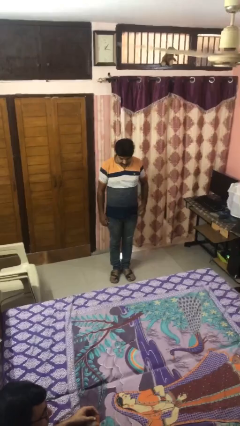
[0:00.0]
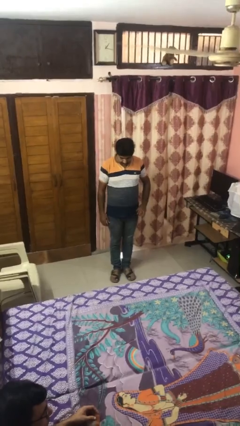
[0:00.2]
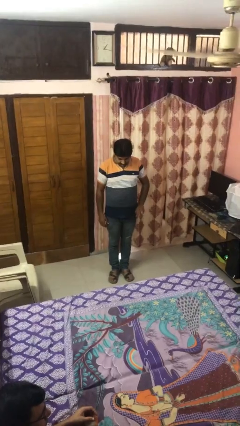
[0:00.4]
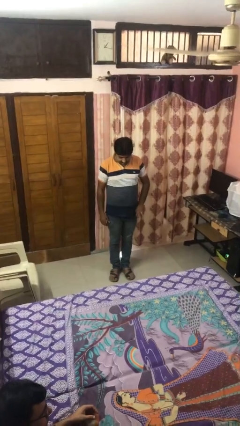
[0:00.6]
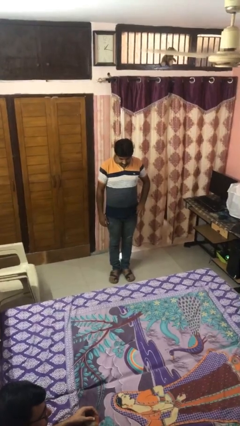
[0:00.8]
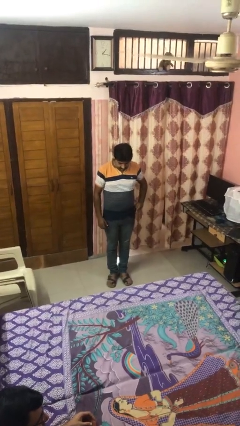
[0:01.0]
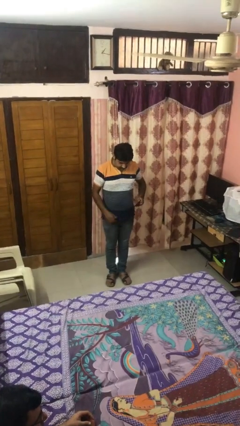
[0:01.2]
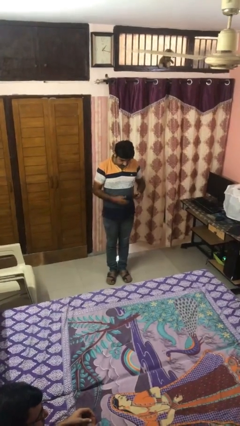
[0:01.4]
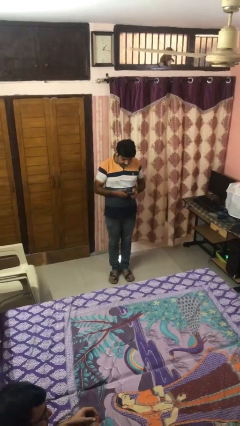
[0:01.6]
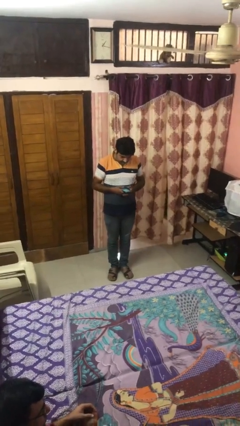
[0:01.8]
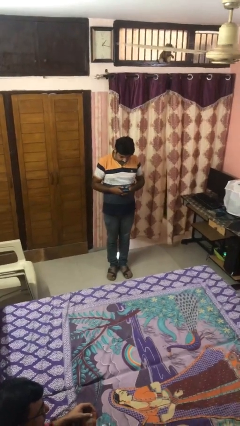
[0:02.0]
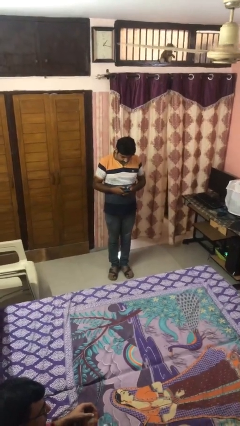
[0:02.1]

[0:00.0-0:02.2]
person takes phone from pocket

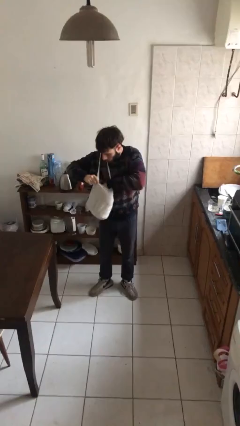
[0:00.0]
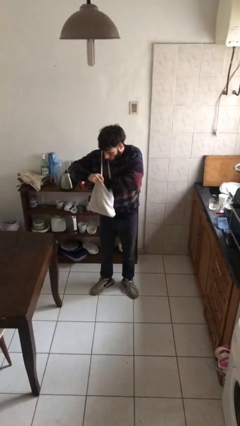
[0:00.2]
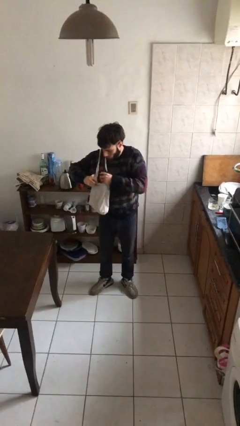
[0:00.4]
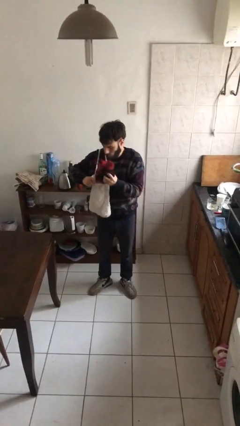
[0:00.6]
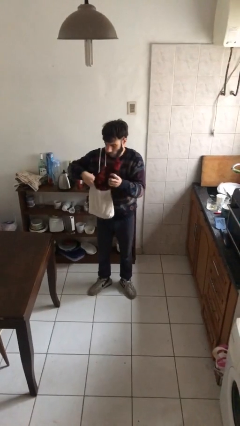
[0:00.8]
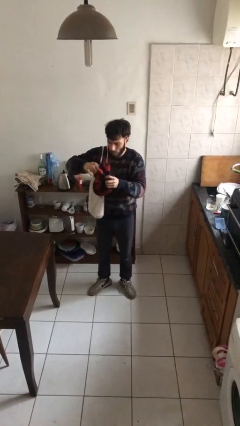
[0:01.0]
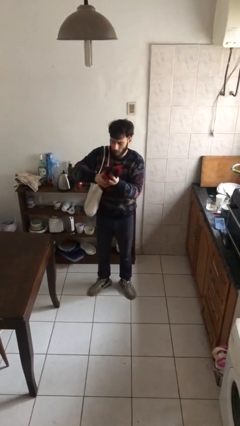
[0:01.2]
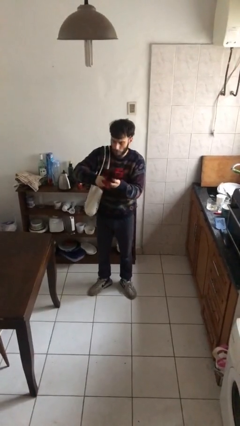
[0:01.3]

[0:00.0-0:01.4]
person takes object from purse

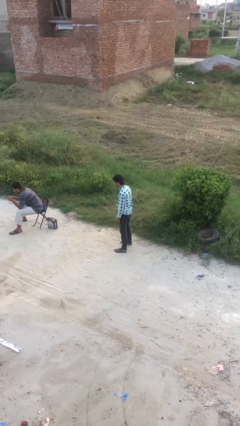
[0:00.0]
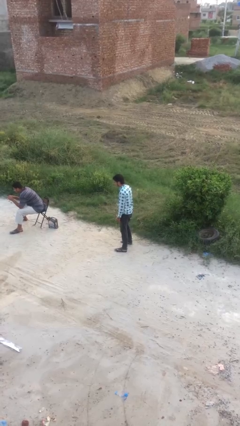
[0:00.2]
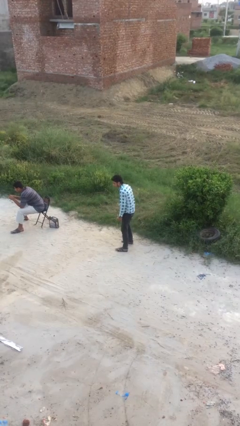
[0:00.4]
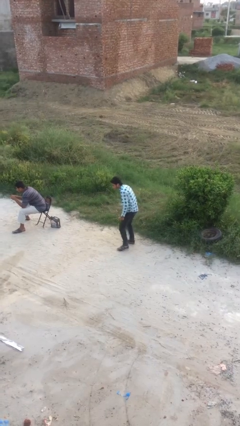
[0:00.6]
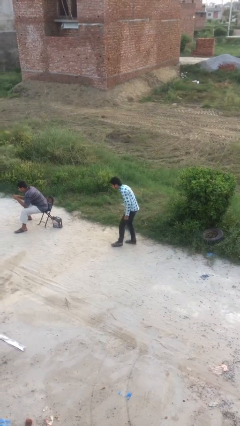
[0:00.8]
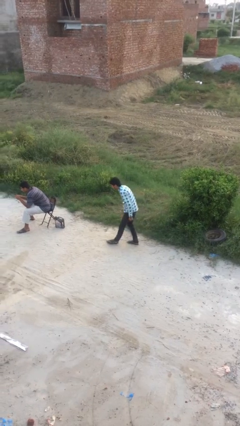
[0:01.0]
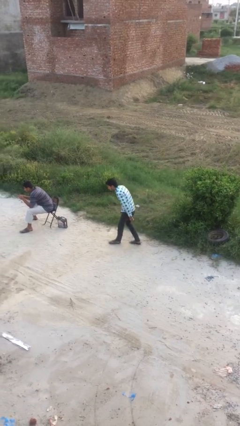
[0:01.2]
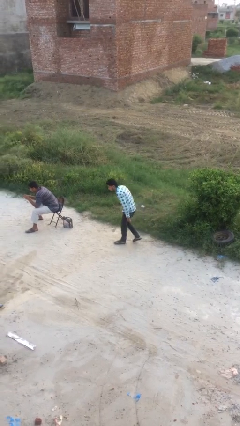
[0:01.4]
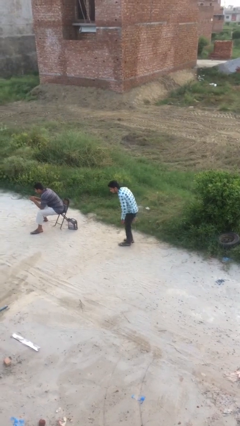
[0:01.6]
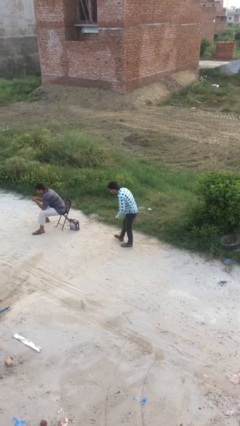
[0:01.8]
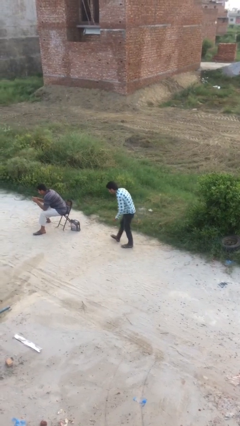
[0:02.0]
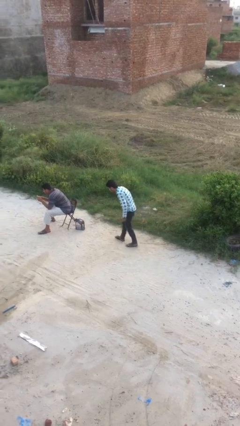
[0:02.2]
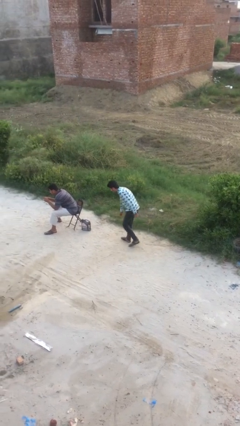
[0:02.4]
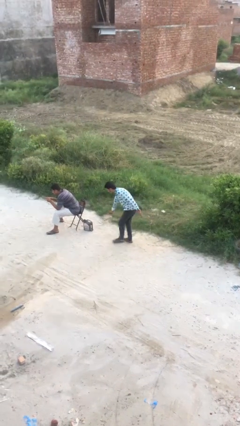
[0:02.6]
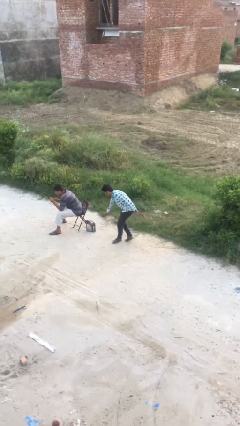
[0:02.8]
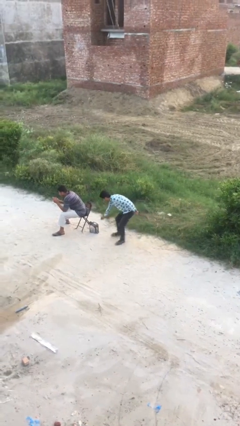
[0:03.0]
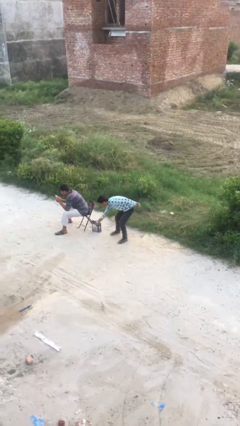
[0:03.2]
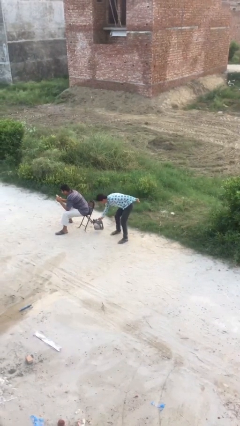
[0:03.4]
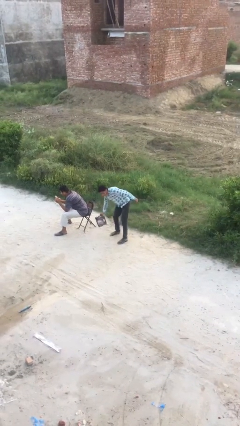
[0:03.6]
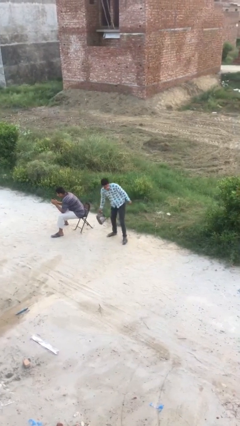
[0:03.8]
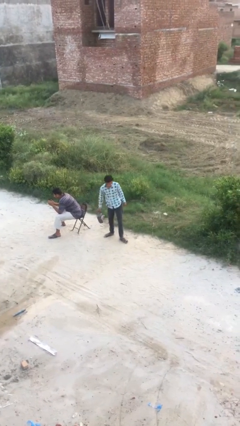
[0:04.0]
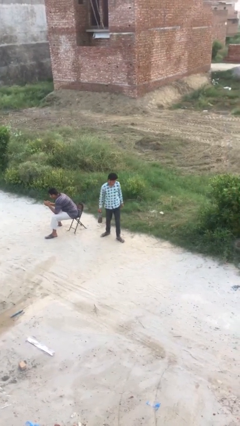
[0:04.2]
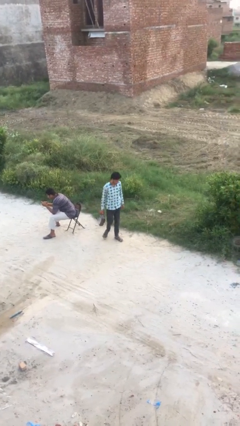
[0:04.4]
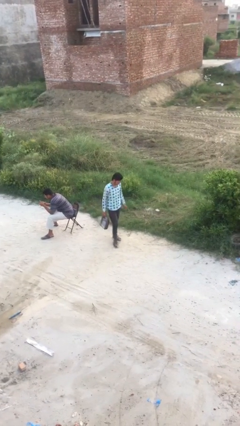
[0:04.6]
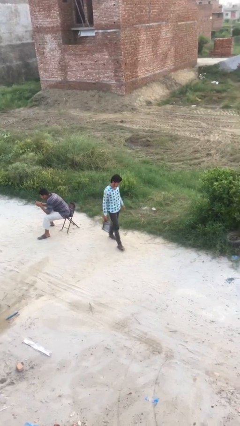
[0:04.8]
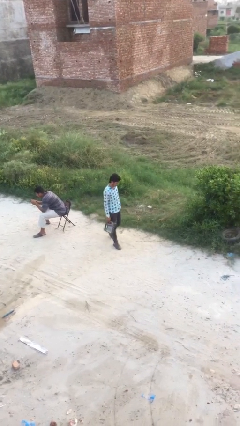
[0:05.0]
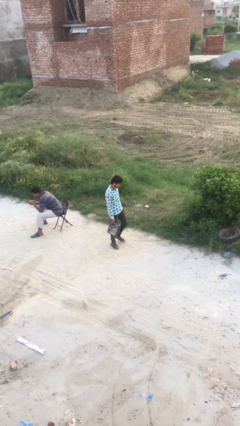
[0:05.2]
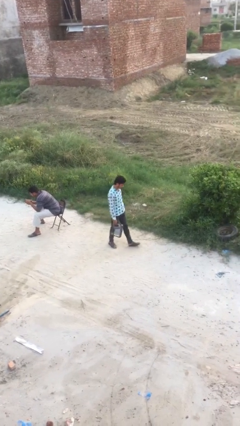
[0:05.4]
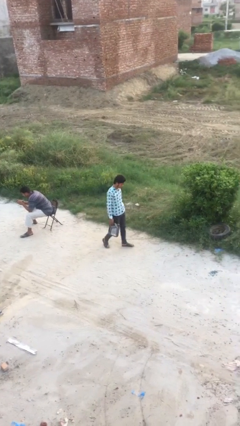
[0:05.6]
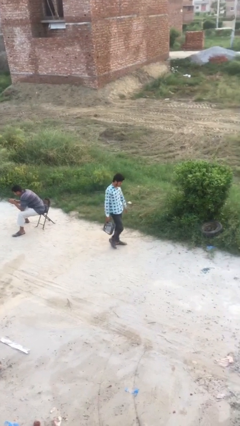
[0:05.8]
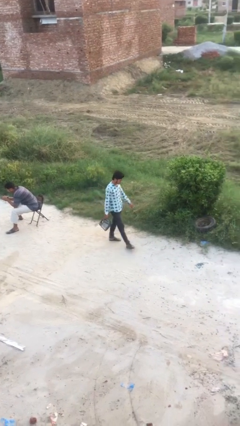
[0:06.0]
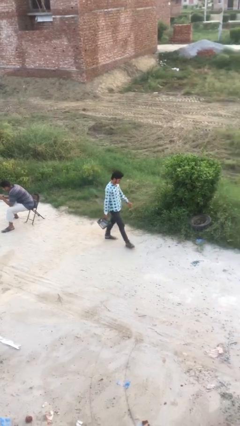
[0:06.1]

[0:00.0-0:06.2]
person steals object from person

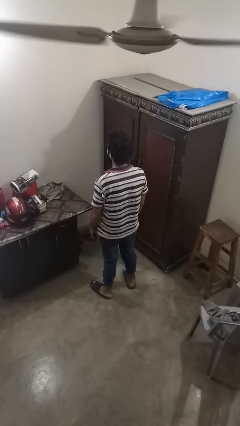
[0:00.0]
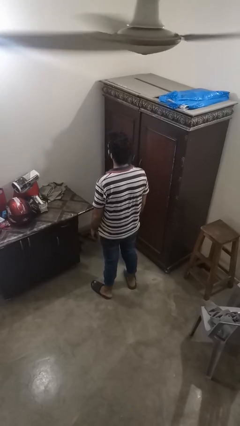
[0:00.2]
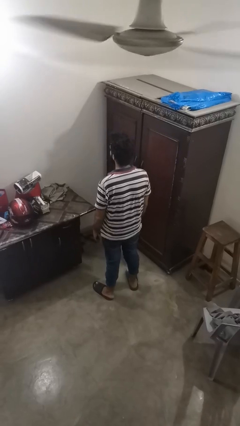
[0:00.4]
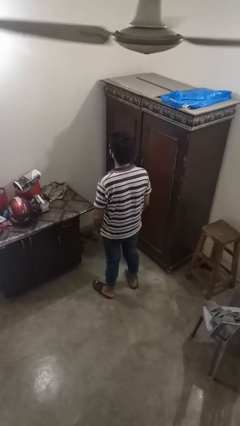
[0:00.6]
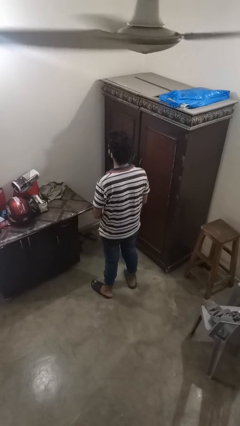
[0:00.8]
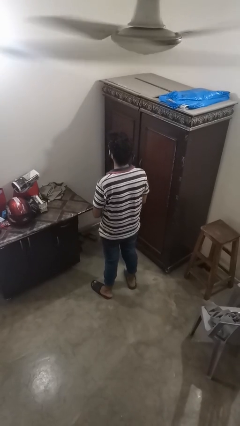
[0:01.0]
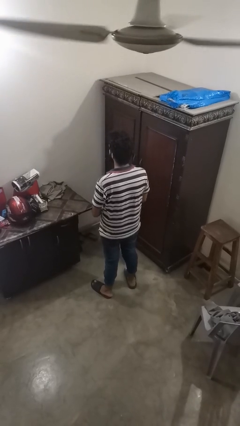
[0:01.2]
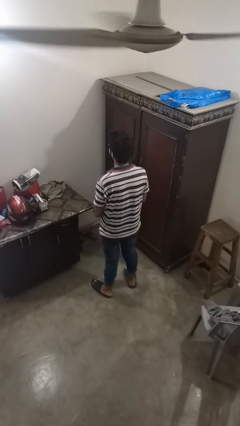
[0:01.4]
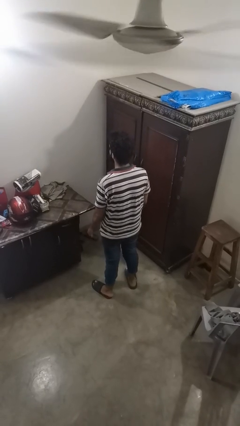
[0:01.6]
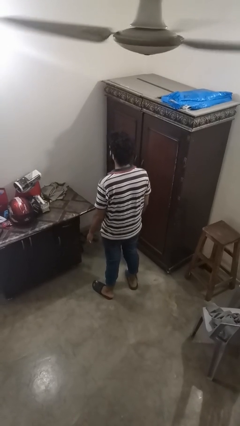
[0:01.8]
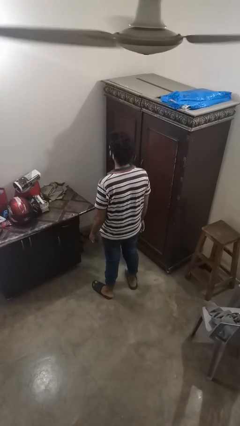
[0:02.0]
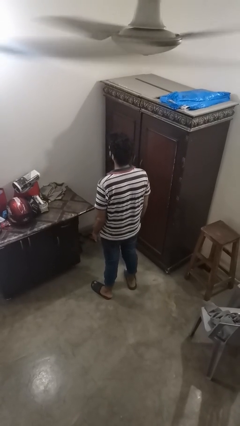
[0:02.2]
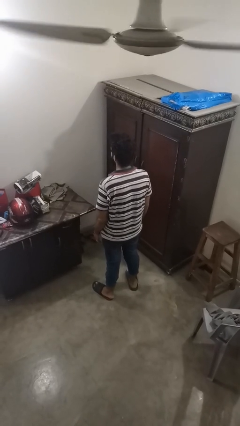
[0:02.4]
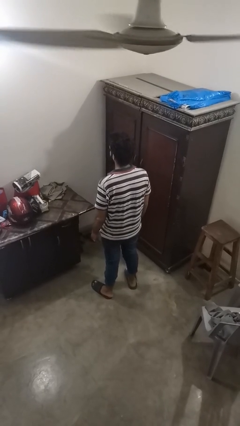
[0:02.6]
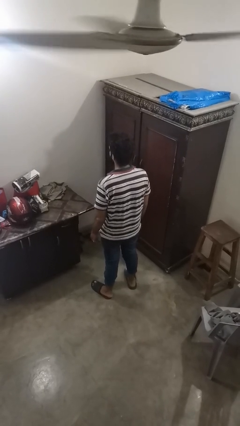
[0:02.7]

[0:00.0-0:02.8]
person puts on ring

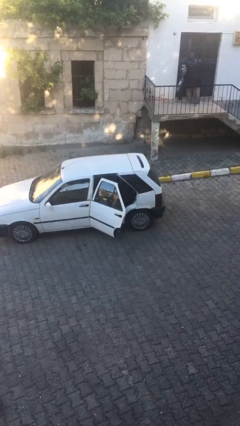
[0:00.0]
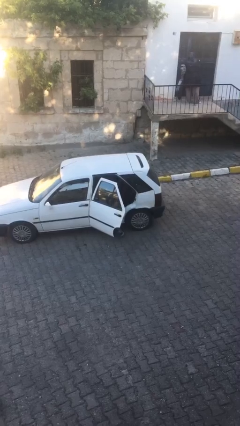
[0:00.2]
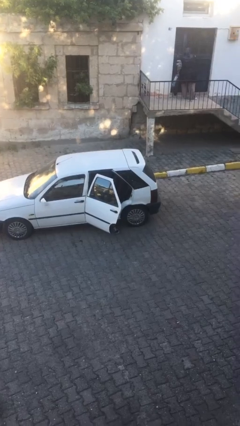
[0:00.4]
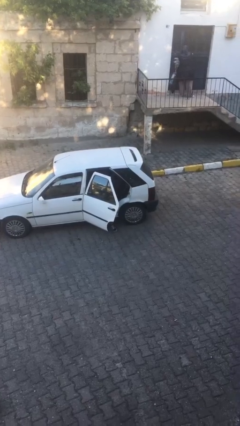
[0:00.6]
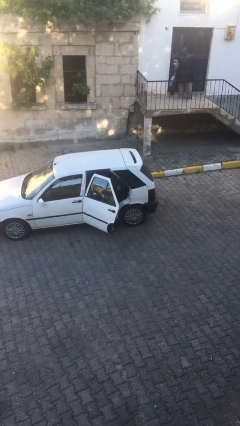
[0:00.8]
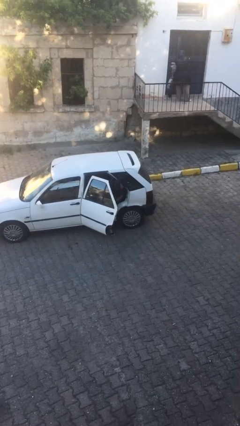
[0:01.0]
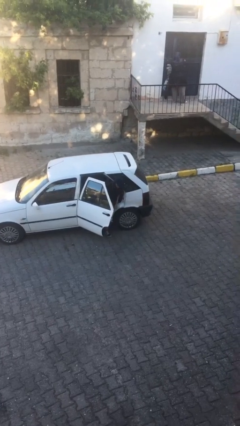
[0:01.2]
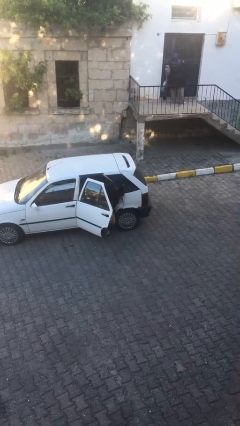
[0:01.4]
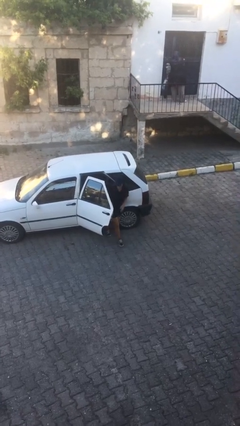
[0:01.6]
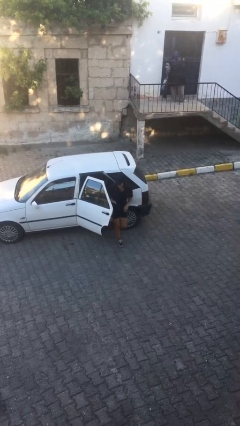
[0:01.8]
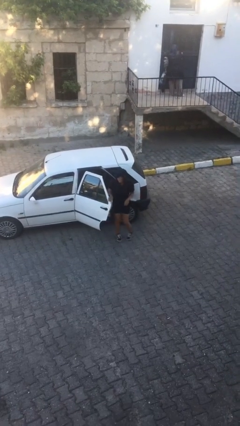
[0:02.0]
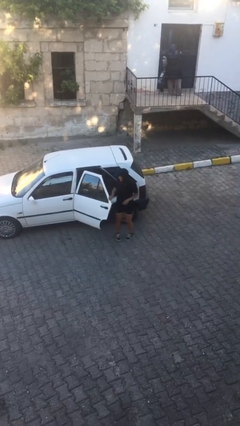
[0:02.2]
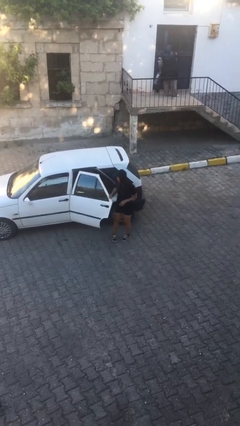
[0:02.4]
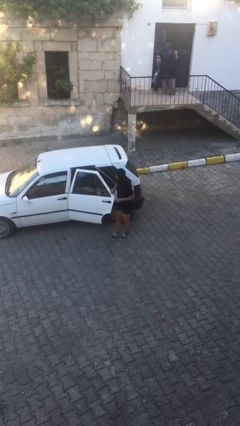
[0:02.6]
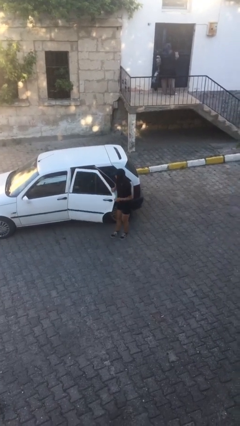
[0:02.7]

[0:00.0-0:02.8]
person exits car

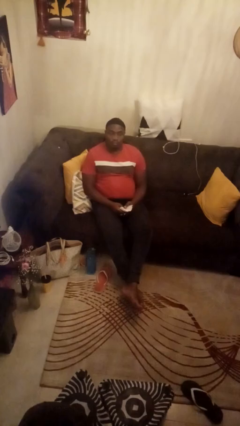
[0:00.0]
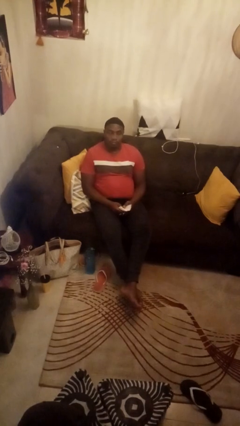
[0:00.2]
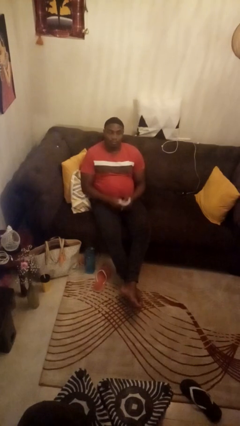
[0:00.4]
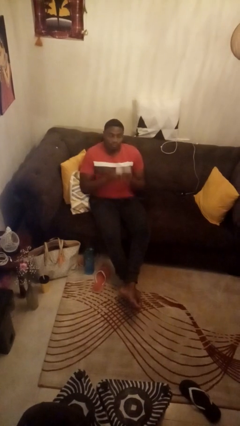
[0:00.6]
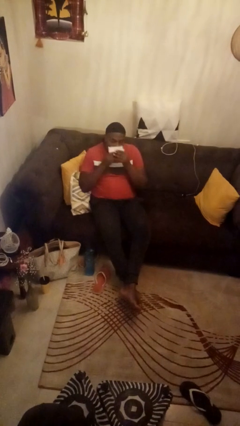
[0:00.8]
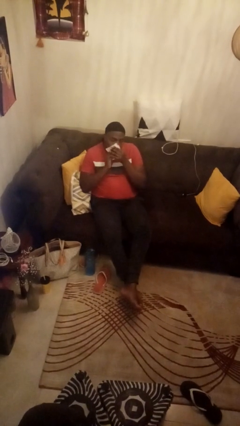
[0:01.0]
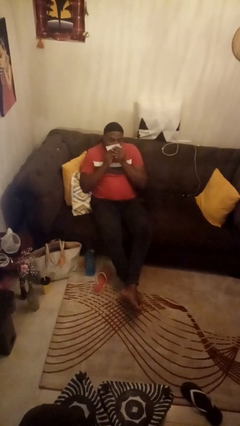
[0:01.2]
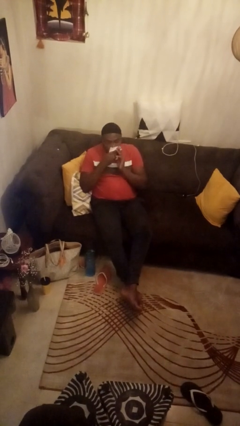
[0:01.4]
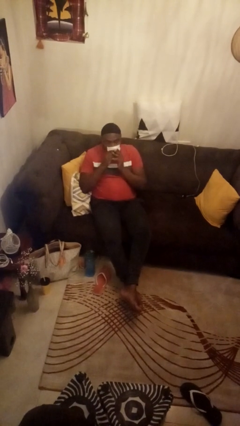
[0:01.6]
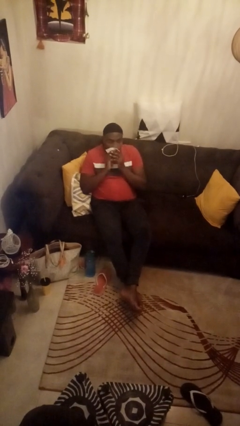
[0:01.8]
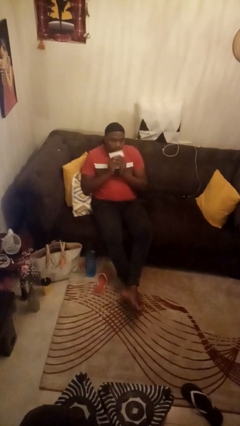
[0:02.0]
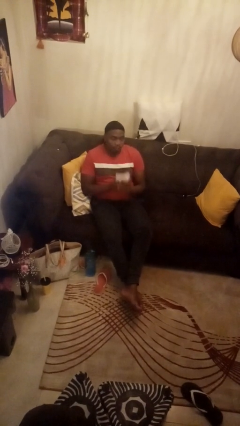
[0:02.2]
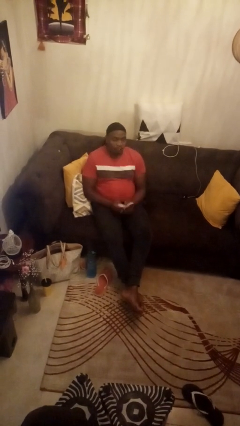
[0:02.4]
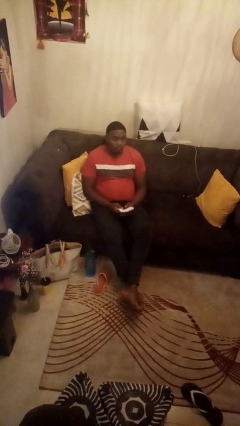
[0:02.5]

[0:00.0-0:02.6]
person wipes mouth with napkin
